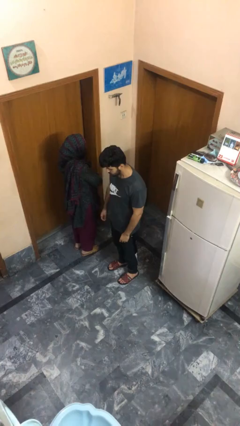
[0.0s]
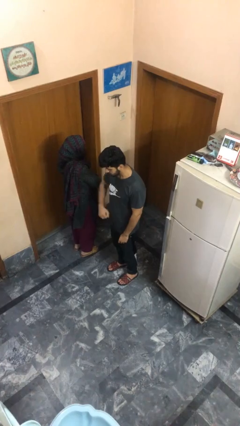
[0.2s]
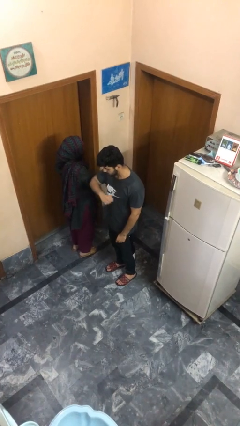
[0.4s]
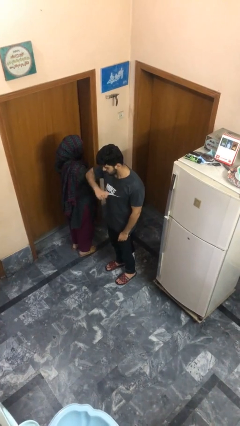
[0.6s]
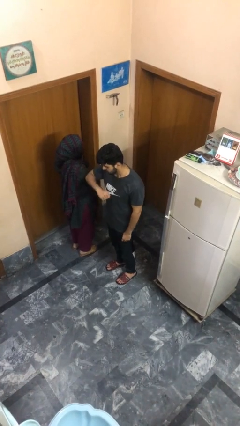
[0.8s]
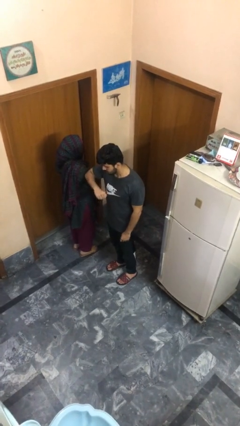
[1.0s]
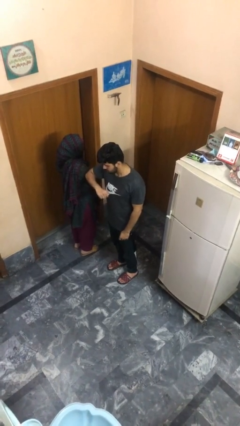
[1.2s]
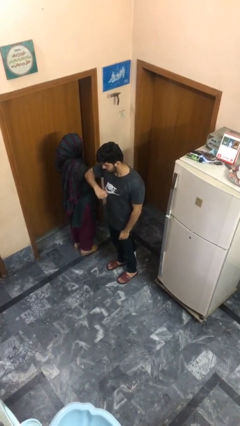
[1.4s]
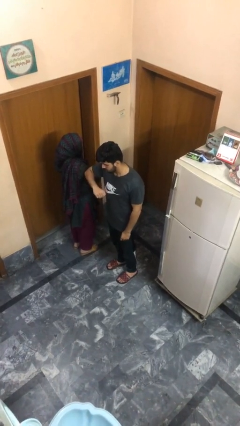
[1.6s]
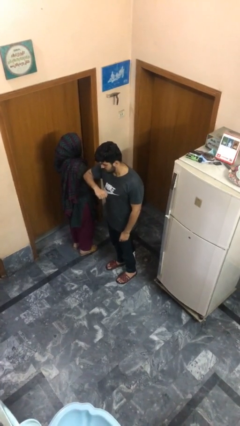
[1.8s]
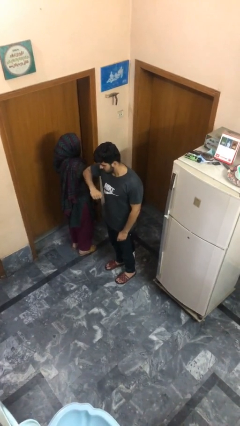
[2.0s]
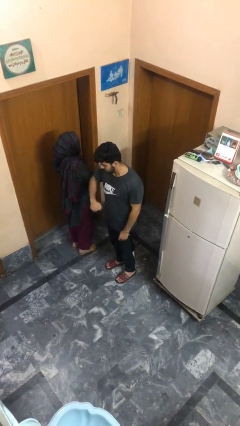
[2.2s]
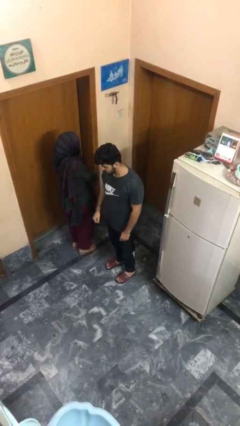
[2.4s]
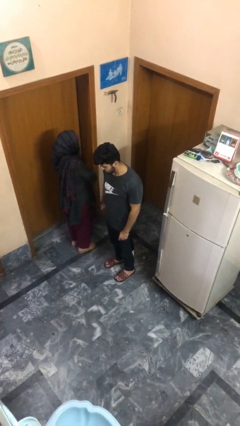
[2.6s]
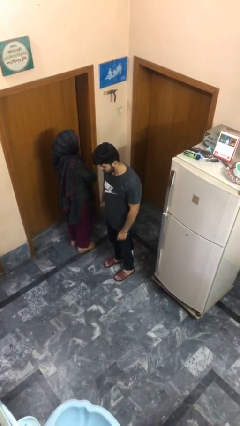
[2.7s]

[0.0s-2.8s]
person nudges person with elbow

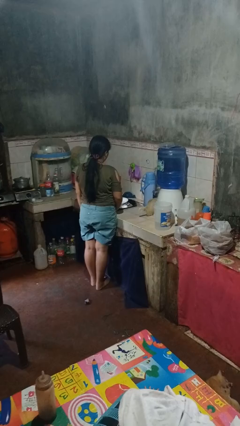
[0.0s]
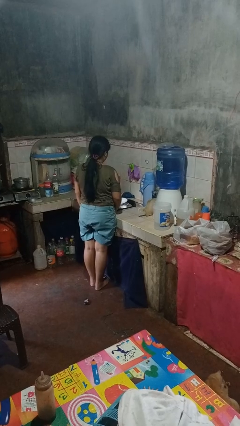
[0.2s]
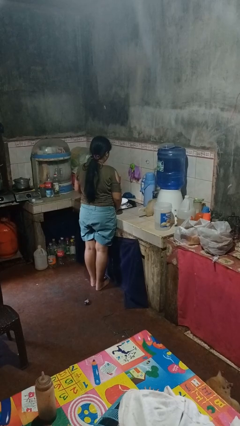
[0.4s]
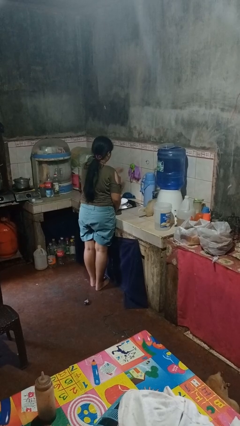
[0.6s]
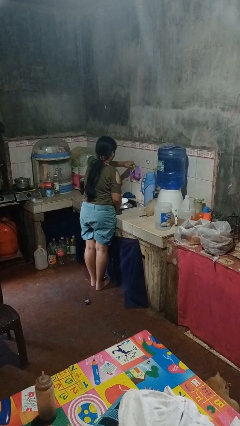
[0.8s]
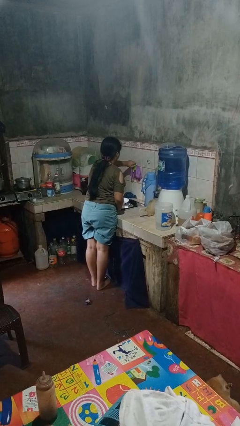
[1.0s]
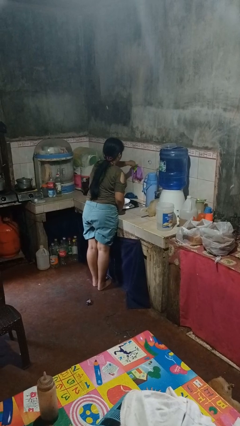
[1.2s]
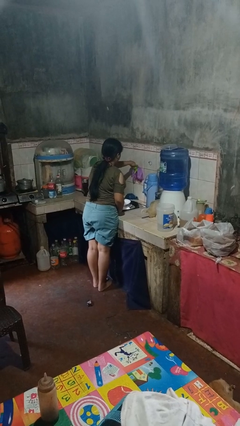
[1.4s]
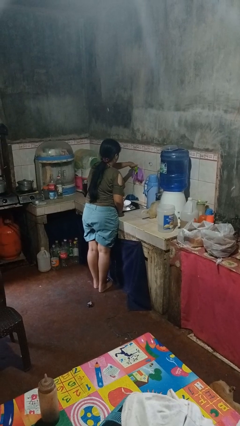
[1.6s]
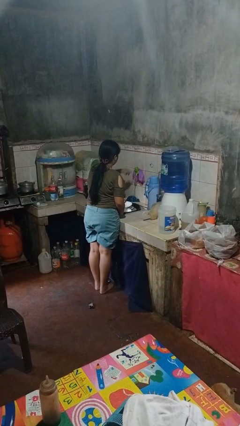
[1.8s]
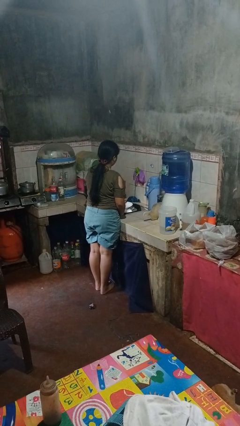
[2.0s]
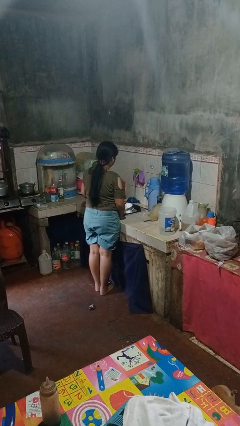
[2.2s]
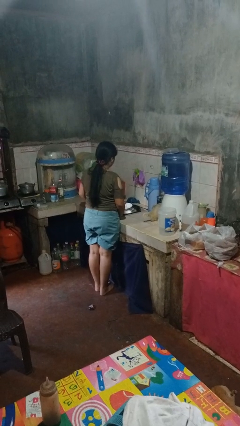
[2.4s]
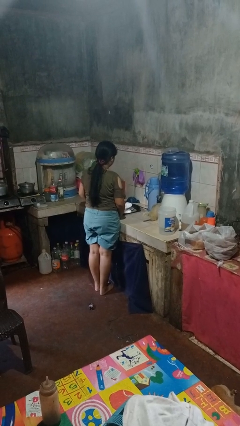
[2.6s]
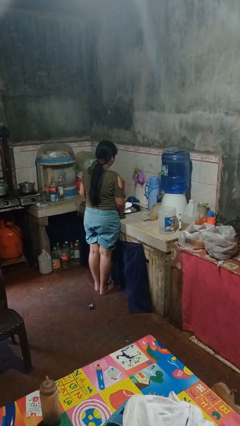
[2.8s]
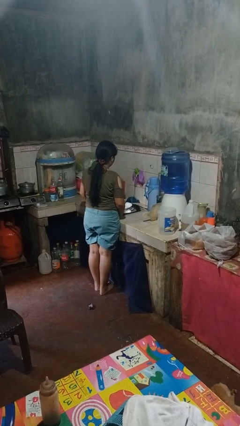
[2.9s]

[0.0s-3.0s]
person turns on faucet

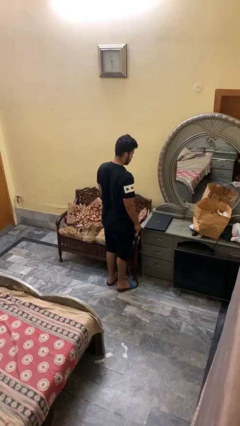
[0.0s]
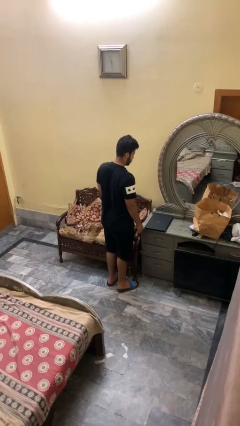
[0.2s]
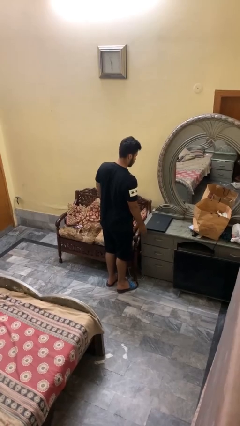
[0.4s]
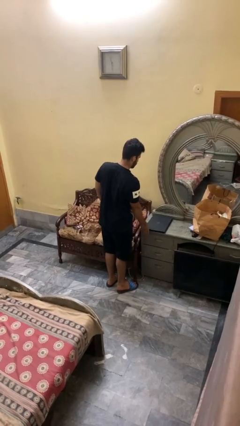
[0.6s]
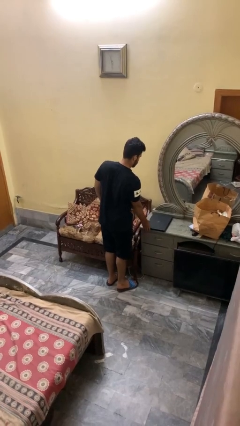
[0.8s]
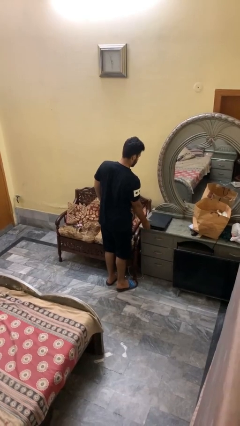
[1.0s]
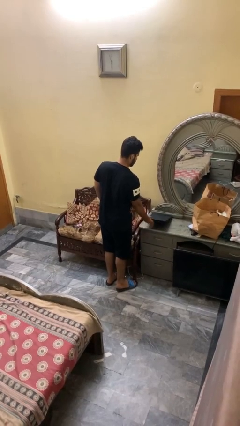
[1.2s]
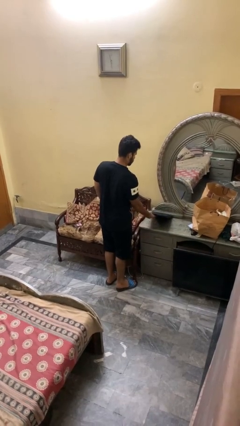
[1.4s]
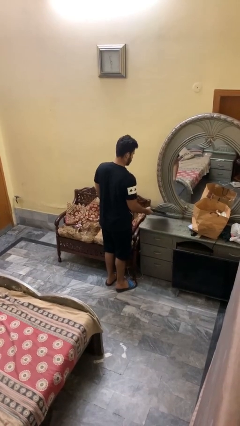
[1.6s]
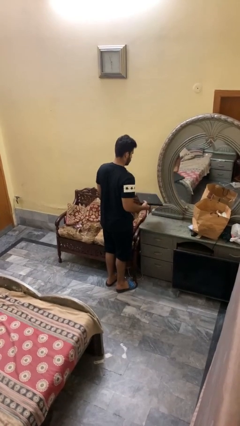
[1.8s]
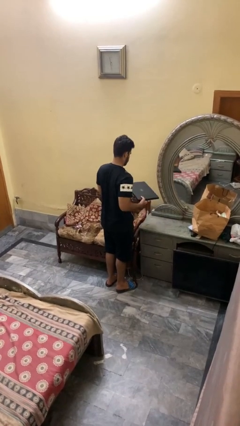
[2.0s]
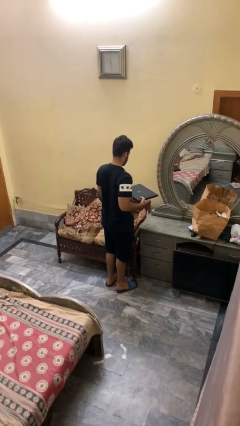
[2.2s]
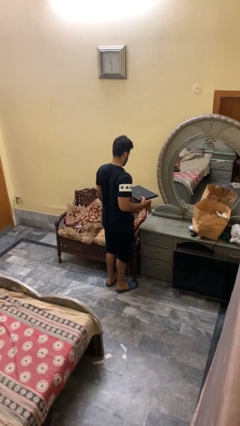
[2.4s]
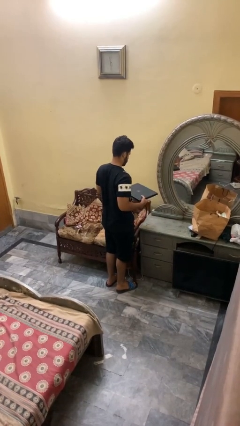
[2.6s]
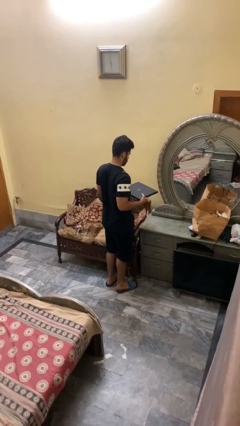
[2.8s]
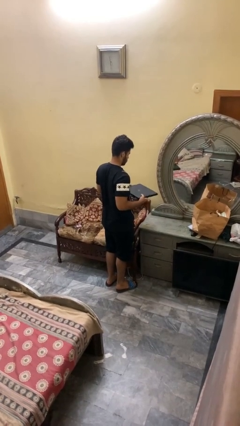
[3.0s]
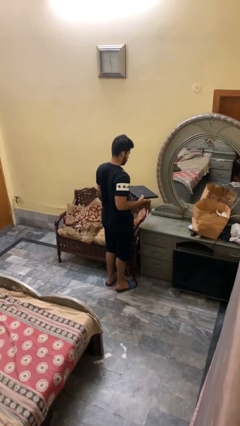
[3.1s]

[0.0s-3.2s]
person picks up object from countertop

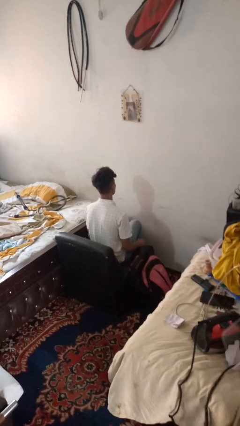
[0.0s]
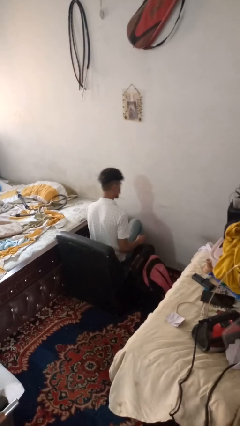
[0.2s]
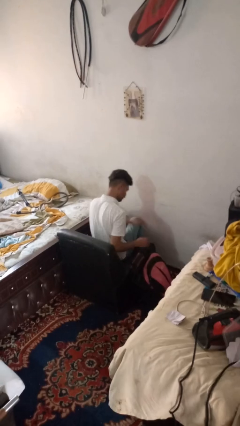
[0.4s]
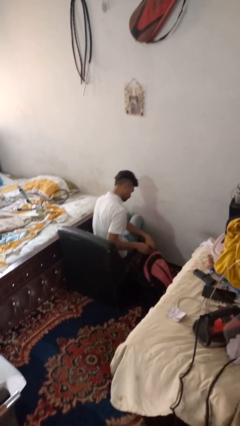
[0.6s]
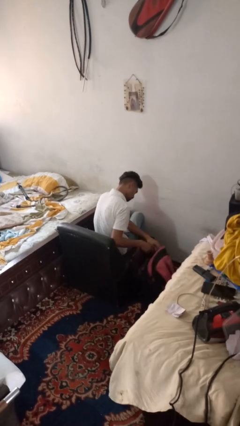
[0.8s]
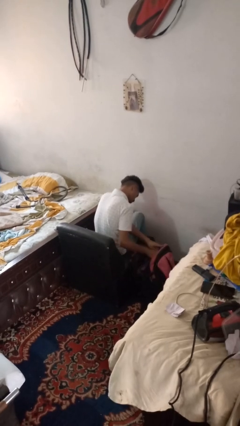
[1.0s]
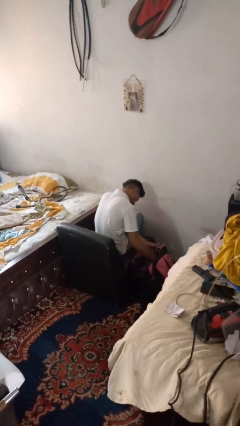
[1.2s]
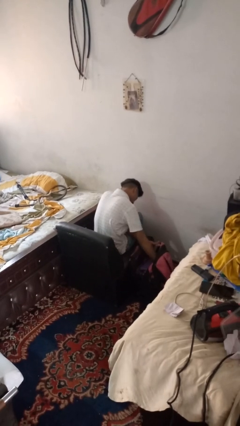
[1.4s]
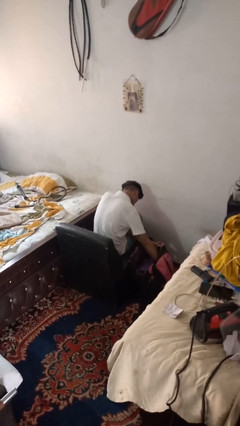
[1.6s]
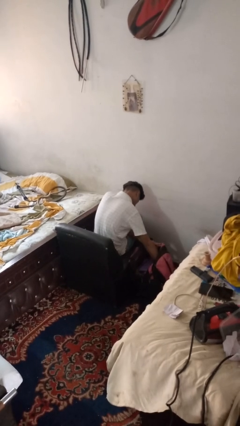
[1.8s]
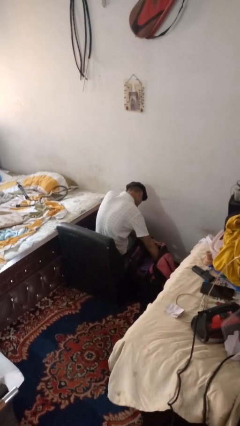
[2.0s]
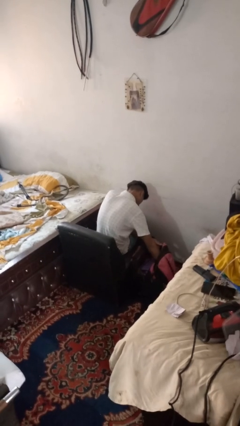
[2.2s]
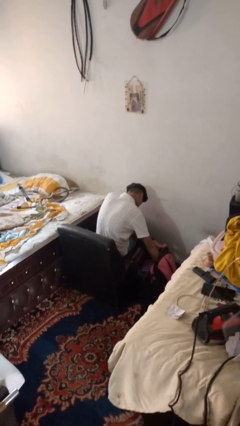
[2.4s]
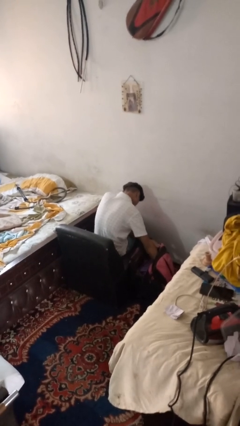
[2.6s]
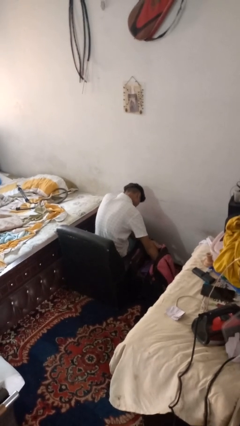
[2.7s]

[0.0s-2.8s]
person searches in bag

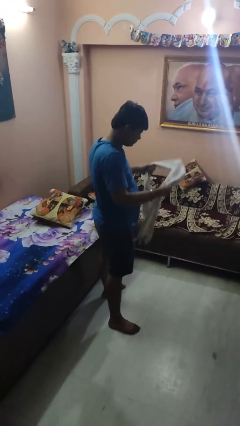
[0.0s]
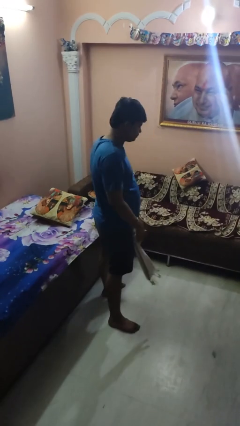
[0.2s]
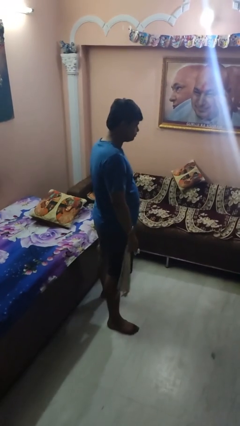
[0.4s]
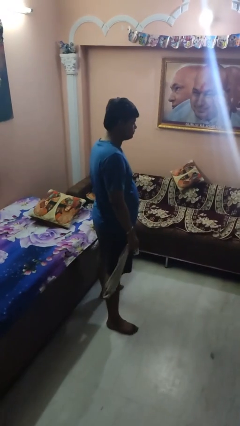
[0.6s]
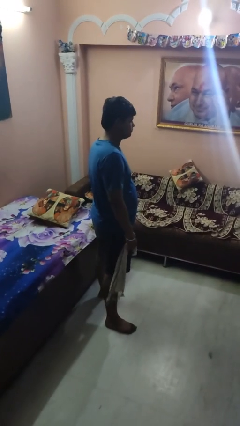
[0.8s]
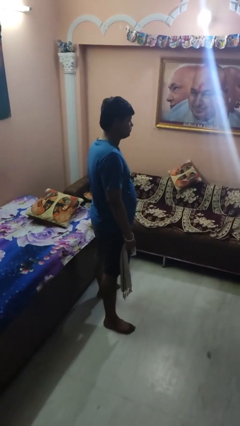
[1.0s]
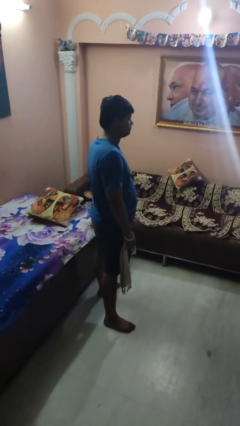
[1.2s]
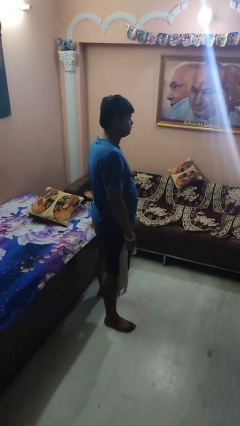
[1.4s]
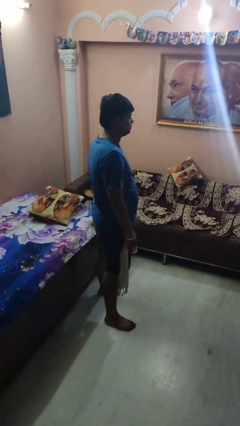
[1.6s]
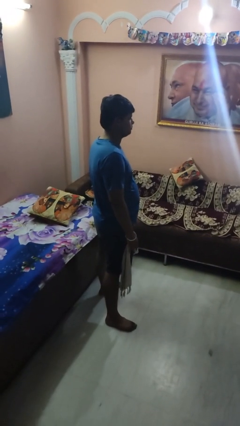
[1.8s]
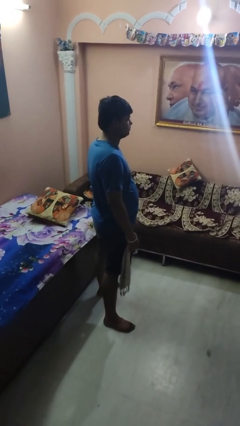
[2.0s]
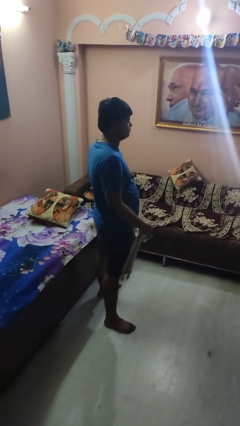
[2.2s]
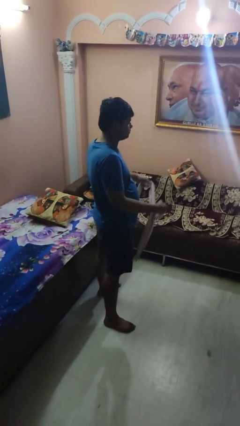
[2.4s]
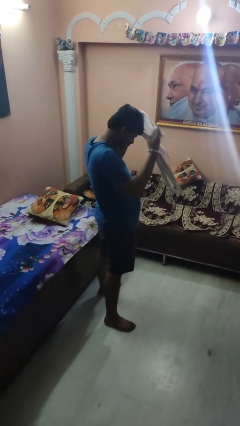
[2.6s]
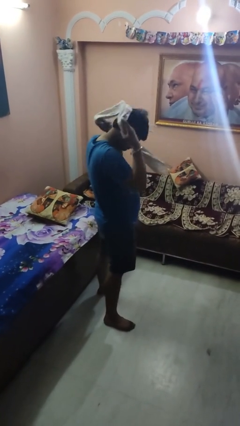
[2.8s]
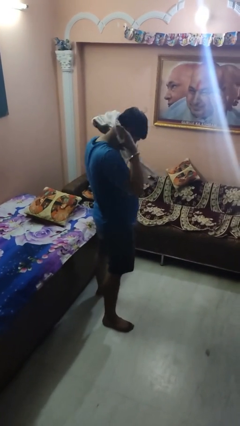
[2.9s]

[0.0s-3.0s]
person takes off scarf

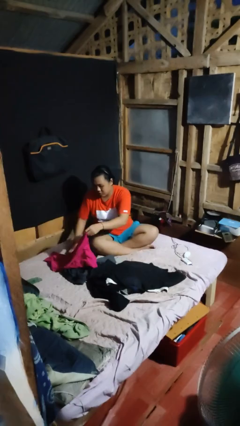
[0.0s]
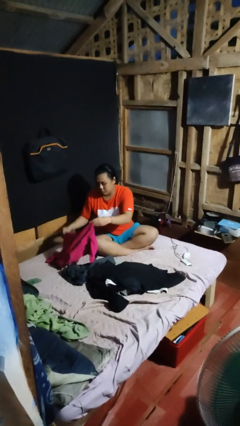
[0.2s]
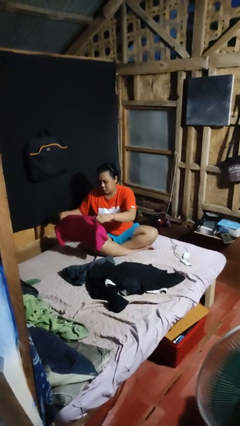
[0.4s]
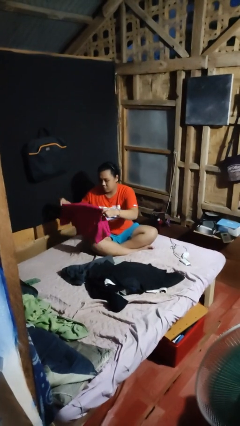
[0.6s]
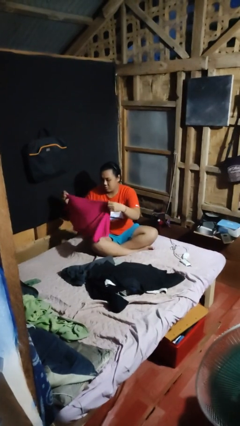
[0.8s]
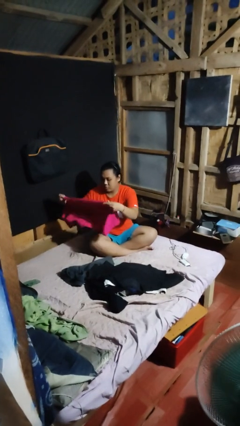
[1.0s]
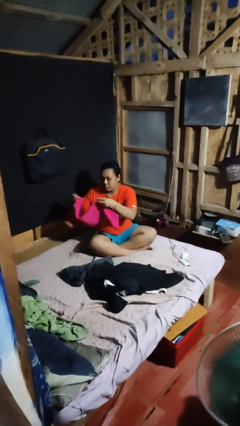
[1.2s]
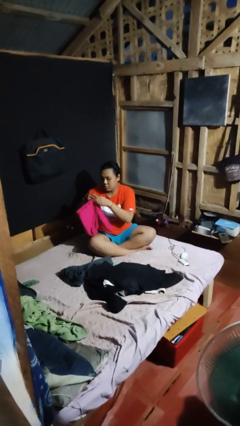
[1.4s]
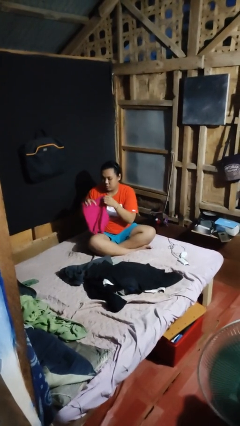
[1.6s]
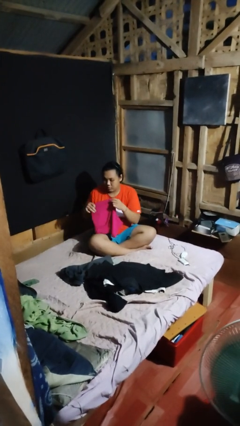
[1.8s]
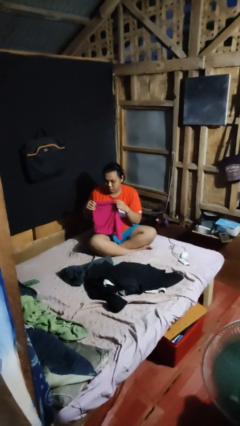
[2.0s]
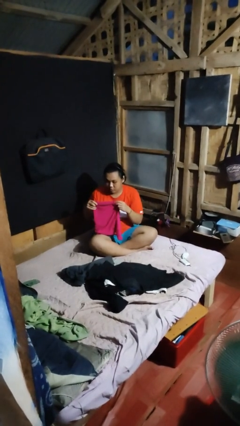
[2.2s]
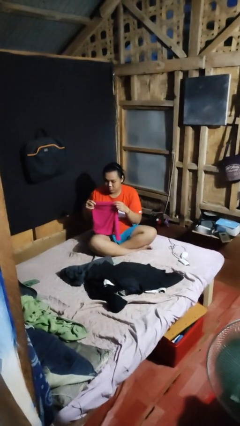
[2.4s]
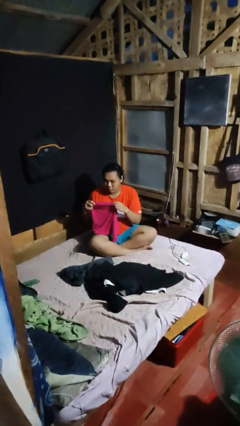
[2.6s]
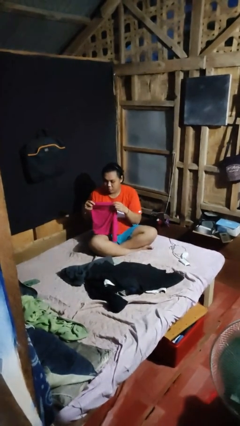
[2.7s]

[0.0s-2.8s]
person folds shirt

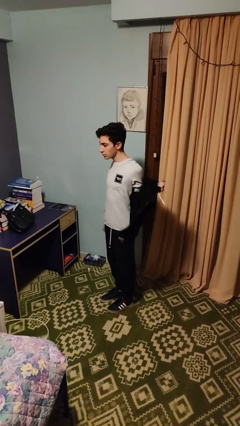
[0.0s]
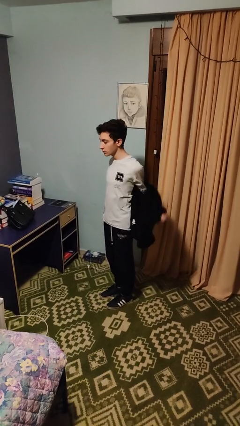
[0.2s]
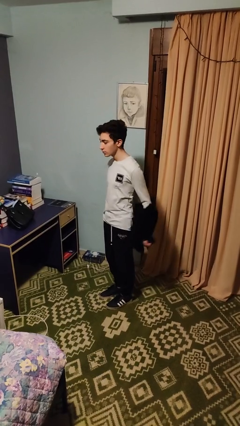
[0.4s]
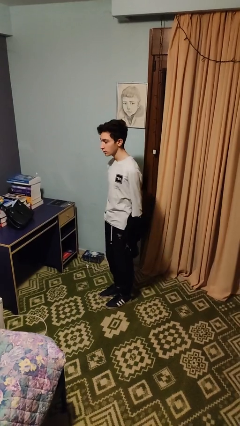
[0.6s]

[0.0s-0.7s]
person takes off jacket
